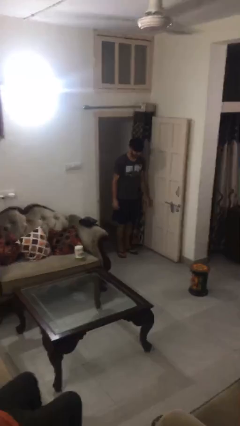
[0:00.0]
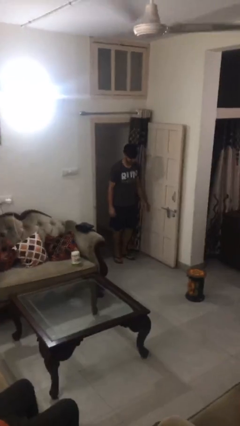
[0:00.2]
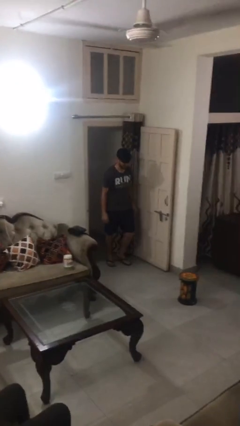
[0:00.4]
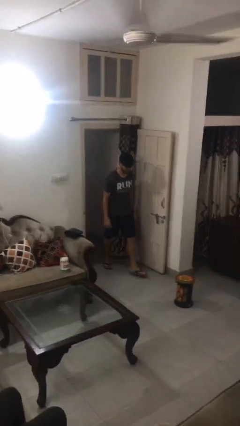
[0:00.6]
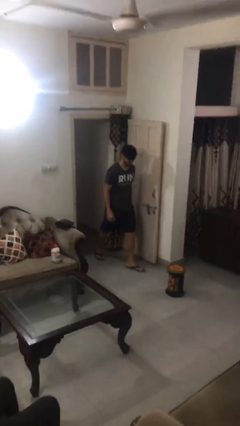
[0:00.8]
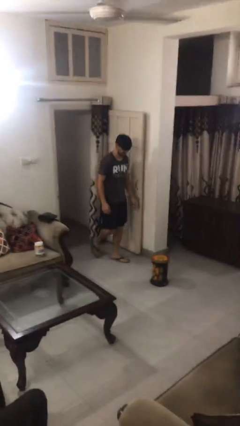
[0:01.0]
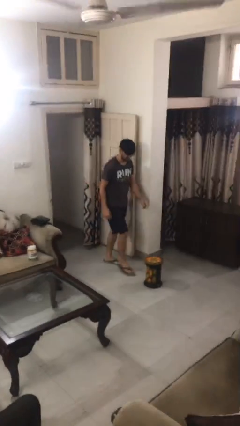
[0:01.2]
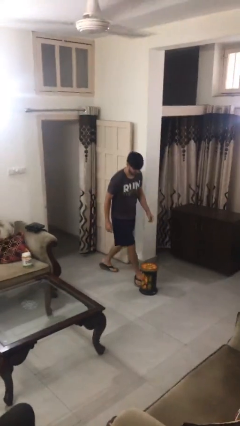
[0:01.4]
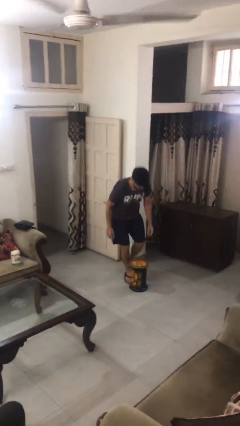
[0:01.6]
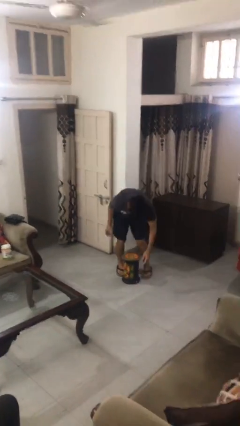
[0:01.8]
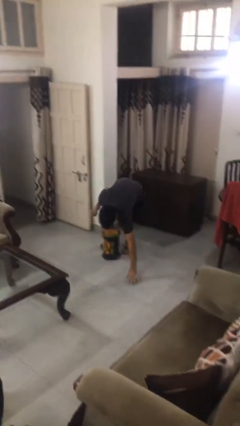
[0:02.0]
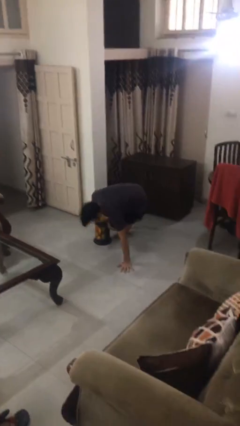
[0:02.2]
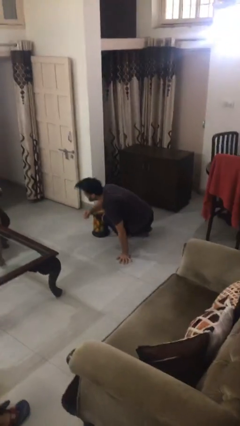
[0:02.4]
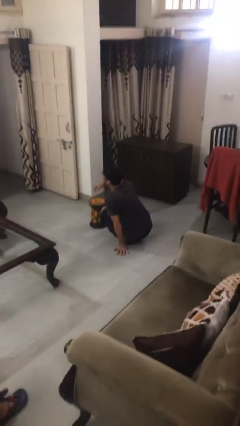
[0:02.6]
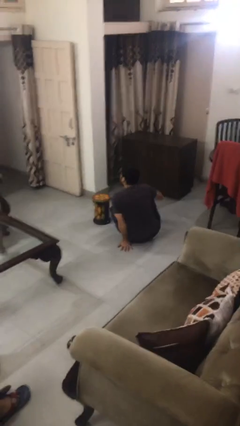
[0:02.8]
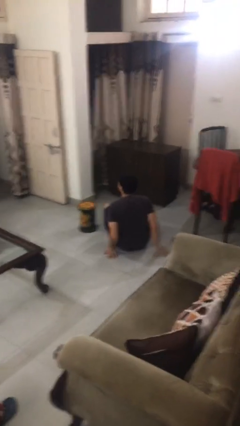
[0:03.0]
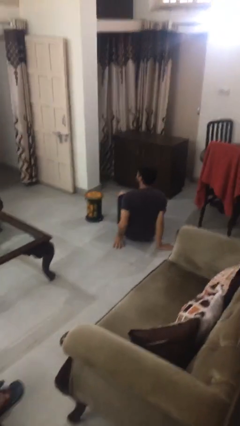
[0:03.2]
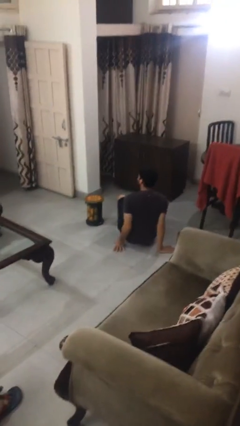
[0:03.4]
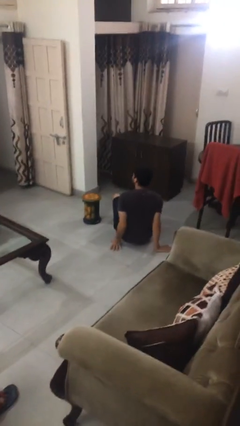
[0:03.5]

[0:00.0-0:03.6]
person trips on object on floor

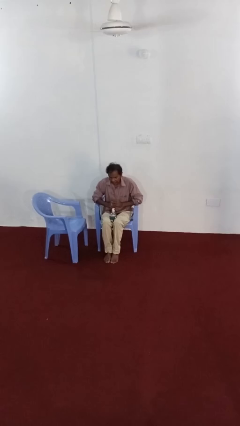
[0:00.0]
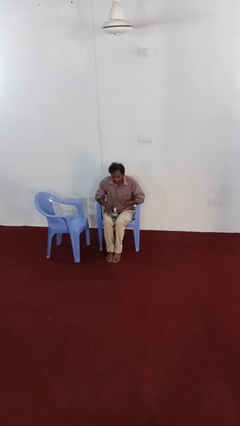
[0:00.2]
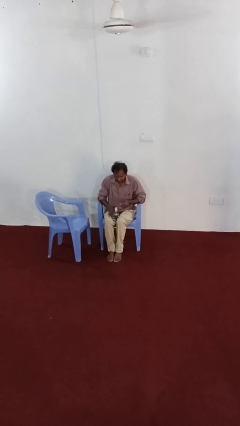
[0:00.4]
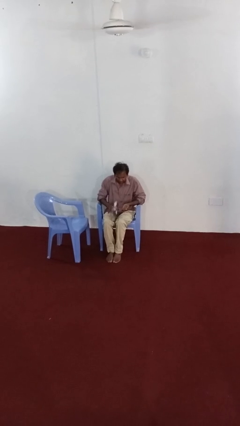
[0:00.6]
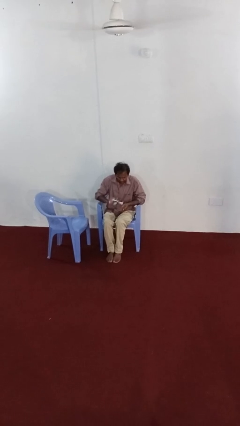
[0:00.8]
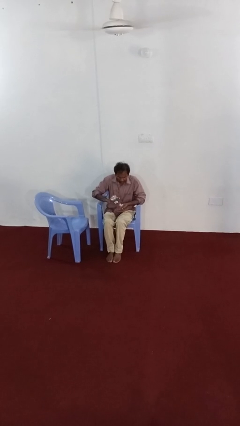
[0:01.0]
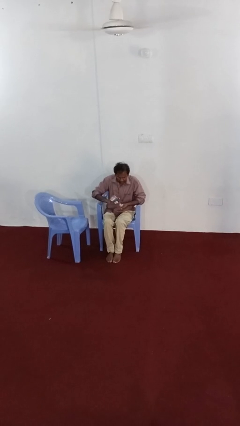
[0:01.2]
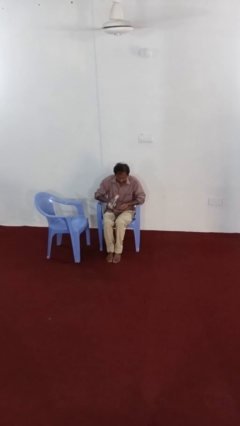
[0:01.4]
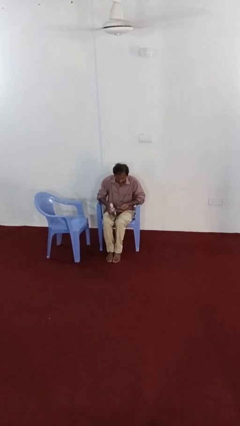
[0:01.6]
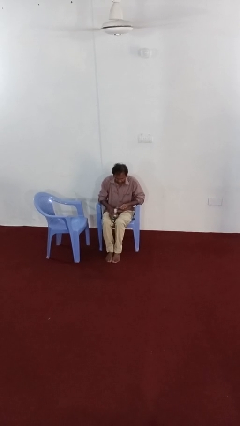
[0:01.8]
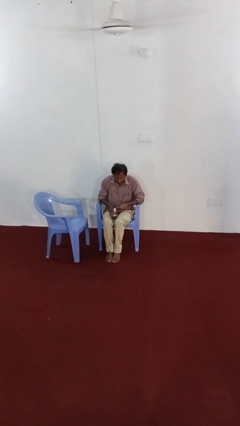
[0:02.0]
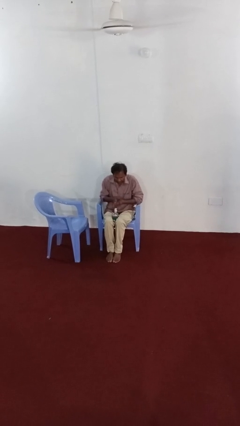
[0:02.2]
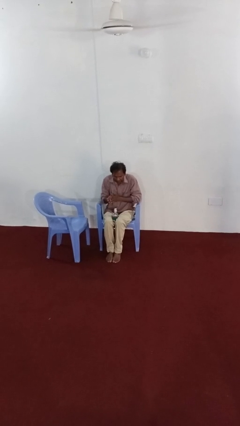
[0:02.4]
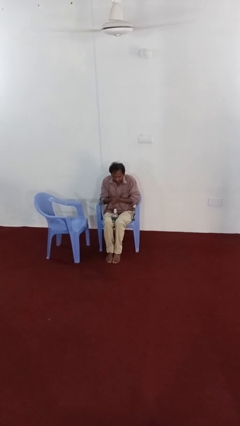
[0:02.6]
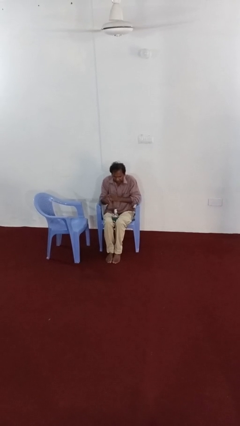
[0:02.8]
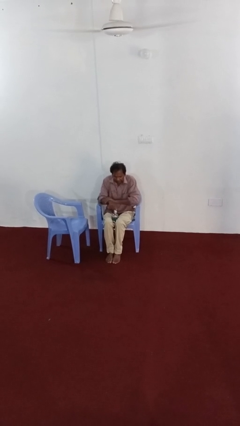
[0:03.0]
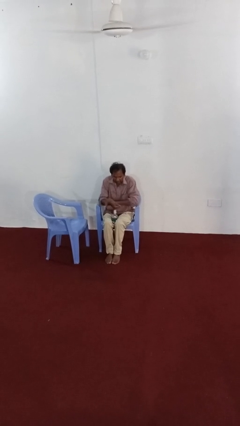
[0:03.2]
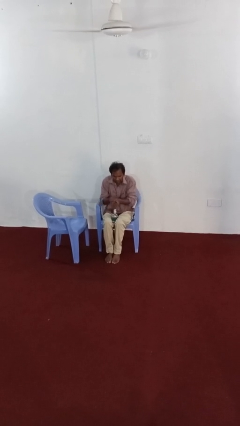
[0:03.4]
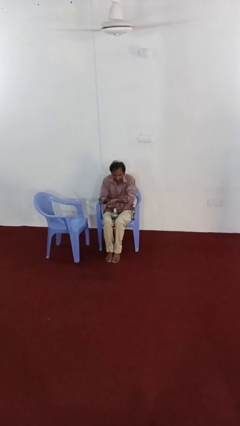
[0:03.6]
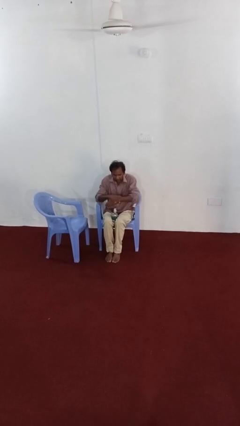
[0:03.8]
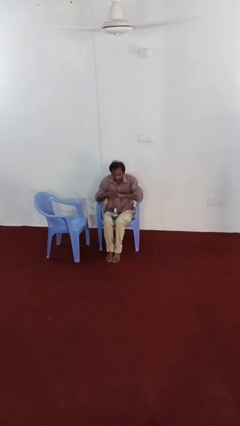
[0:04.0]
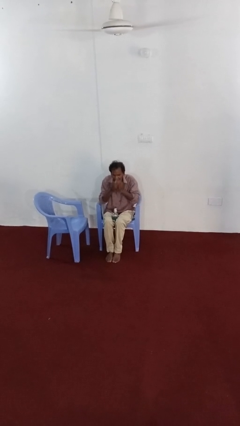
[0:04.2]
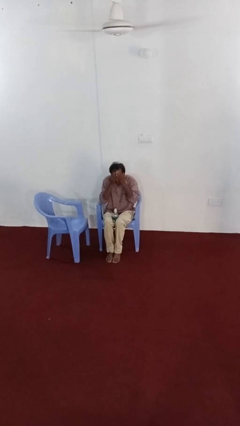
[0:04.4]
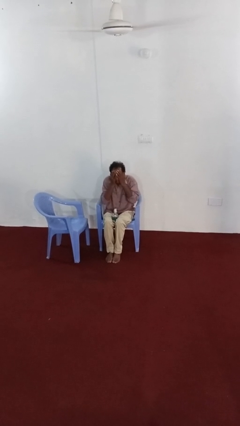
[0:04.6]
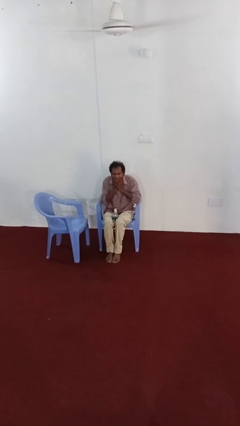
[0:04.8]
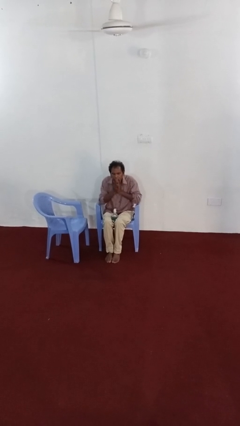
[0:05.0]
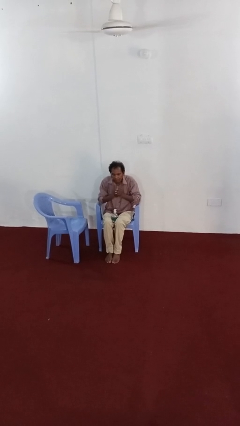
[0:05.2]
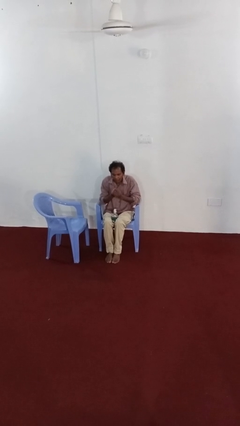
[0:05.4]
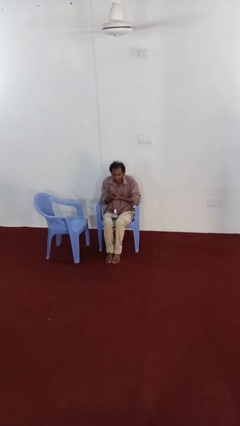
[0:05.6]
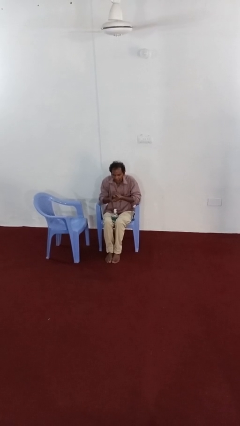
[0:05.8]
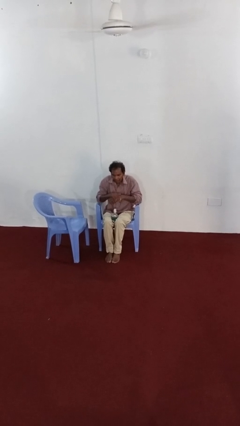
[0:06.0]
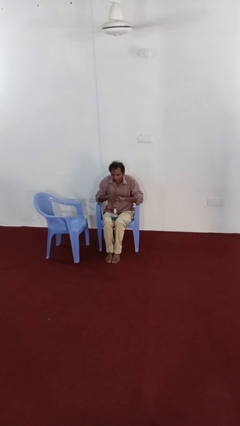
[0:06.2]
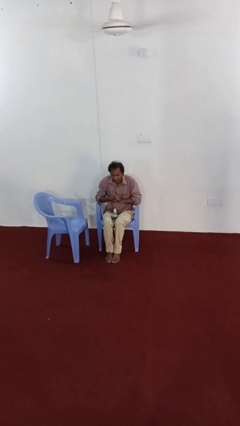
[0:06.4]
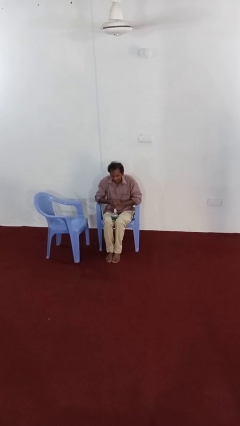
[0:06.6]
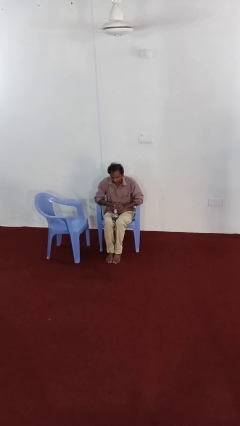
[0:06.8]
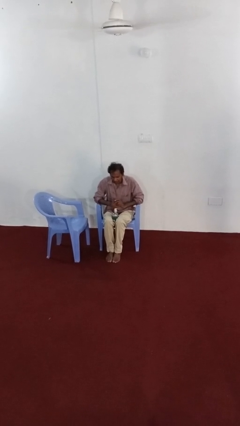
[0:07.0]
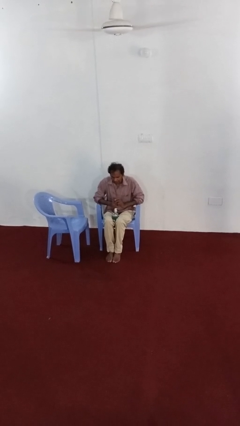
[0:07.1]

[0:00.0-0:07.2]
person applies sunscreen

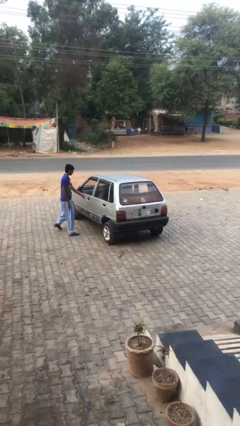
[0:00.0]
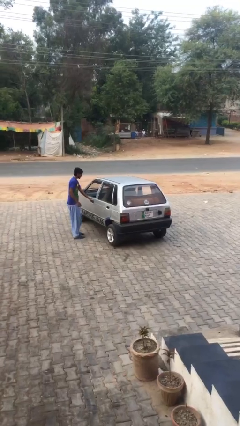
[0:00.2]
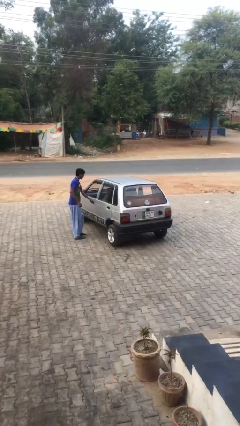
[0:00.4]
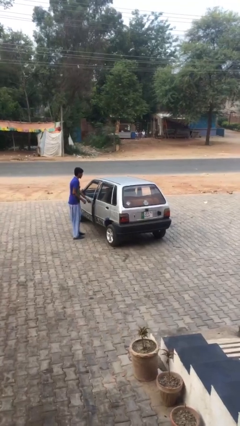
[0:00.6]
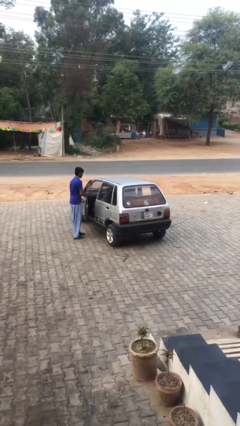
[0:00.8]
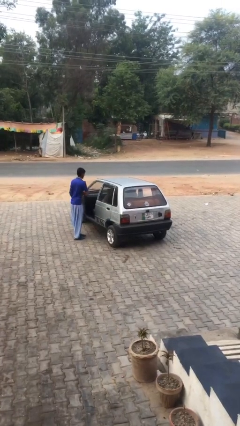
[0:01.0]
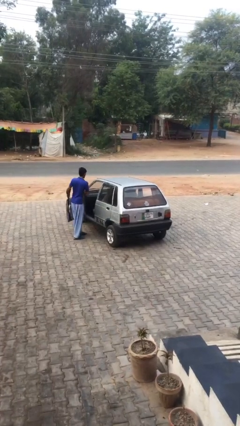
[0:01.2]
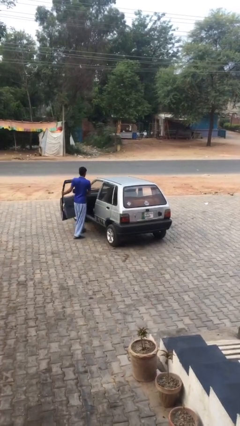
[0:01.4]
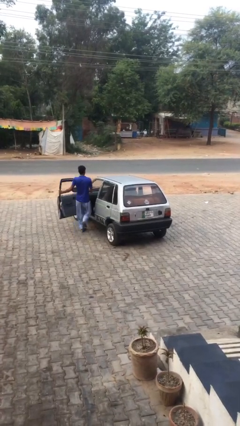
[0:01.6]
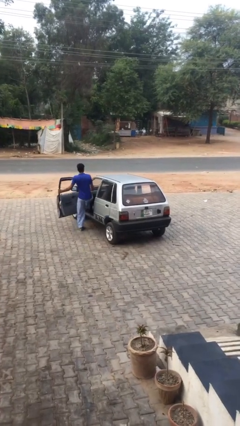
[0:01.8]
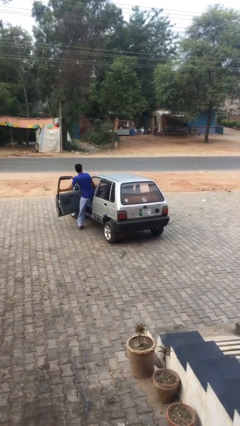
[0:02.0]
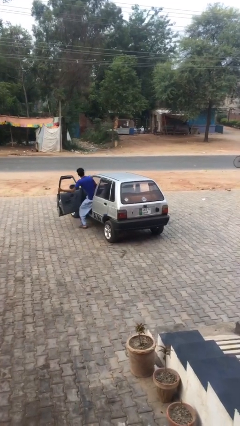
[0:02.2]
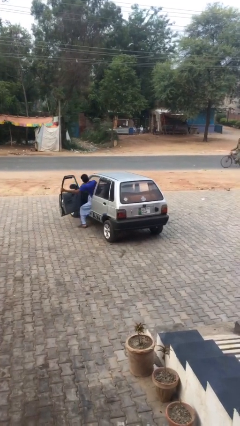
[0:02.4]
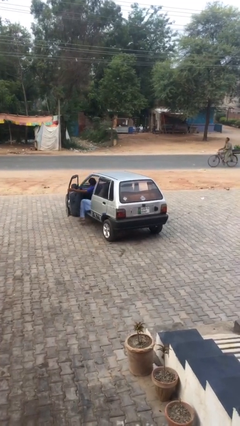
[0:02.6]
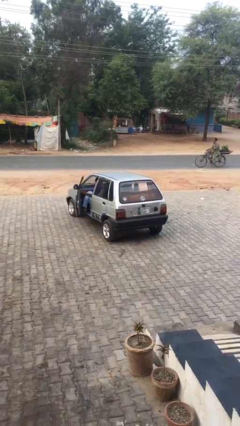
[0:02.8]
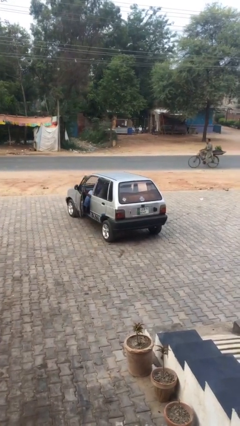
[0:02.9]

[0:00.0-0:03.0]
car picks up person

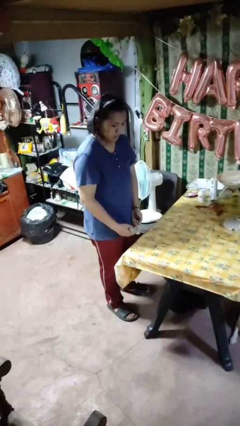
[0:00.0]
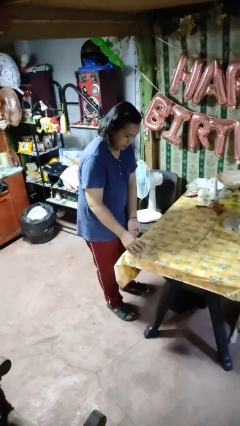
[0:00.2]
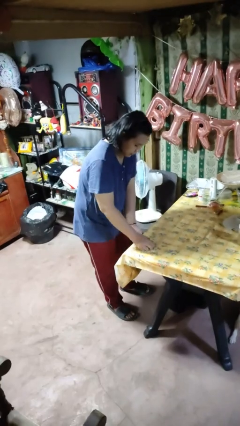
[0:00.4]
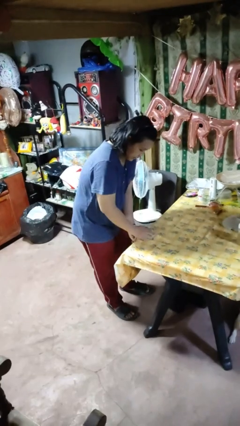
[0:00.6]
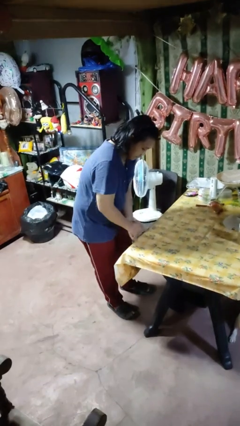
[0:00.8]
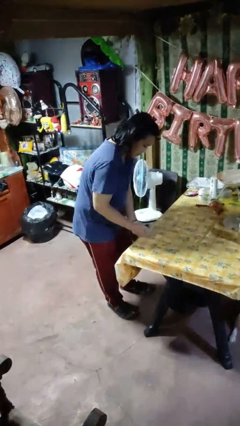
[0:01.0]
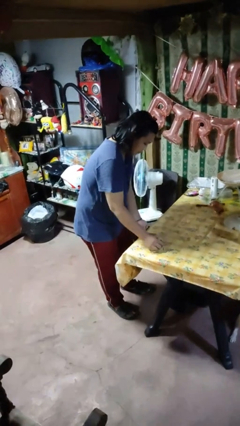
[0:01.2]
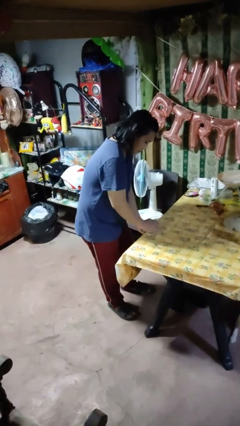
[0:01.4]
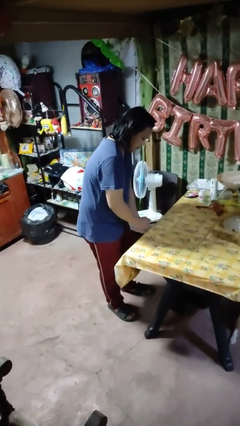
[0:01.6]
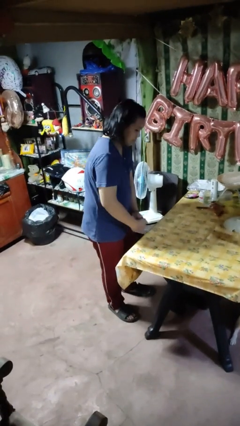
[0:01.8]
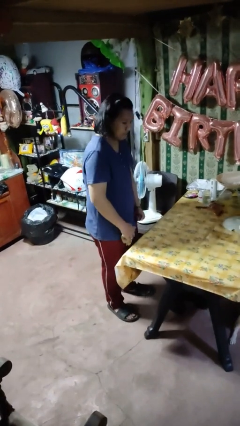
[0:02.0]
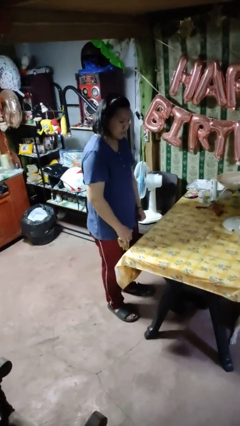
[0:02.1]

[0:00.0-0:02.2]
person cleans table with rag

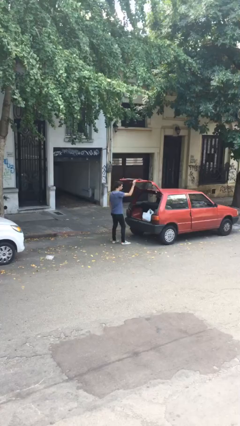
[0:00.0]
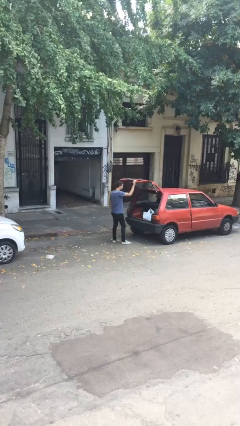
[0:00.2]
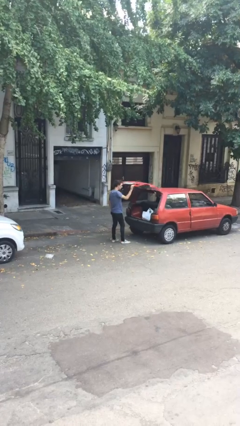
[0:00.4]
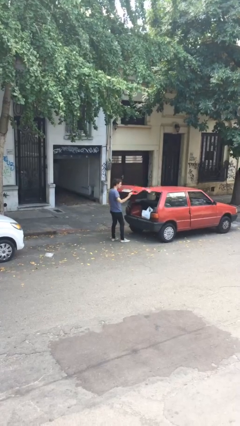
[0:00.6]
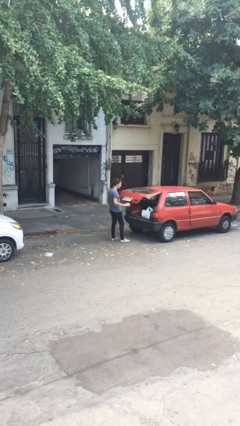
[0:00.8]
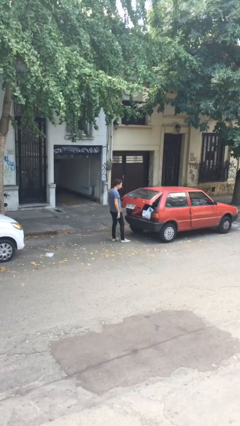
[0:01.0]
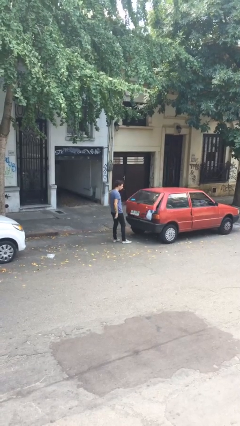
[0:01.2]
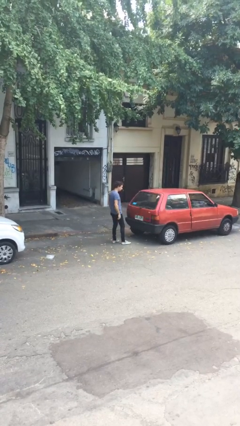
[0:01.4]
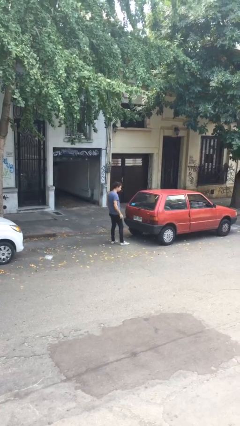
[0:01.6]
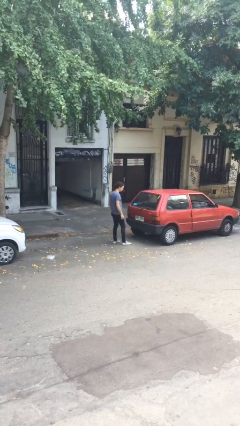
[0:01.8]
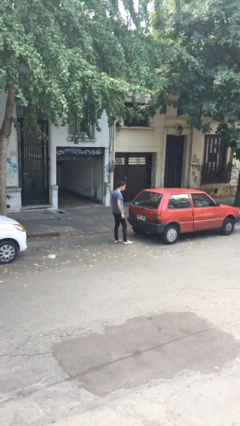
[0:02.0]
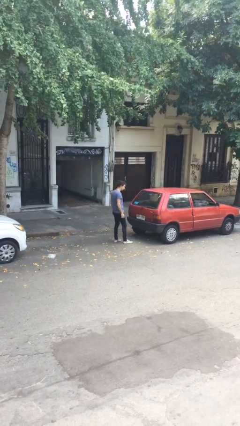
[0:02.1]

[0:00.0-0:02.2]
person closes car trunk
